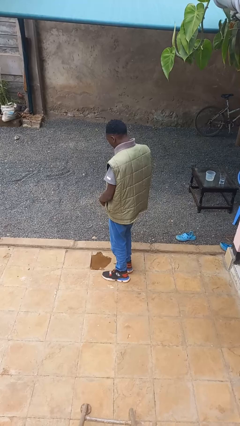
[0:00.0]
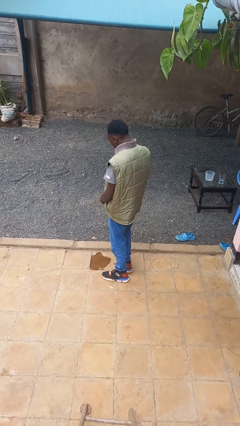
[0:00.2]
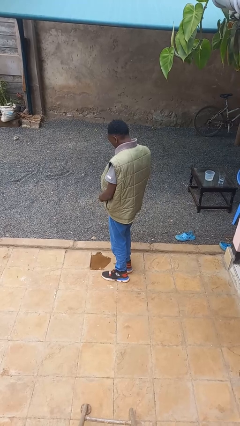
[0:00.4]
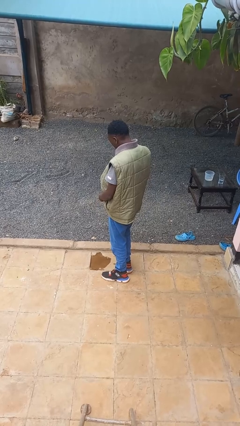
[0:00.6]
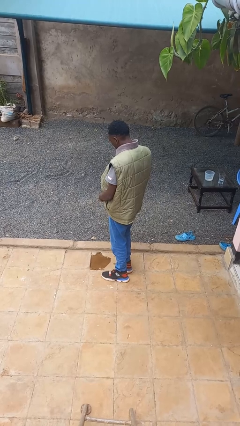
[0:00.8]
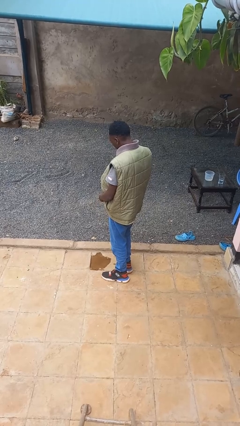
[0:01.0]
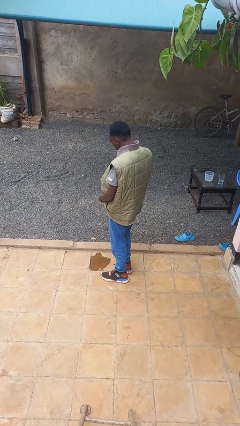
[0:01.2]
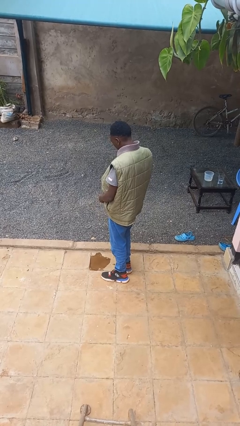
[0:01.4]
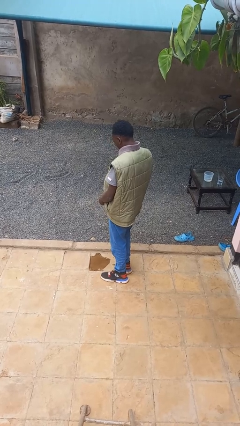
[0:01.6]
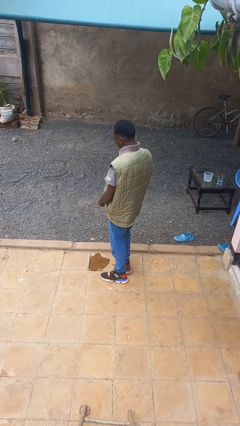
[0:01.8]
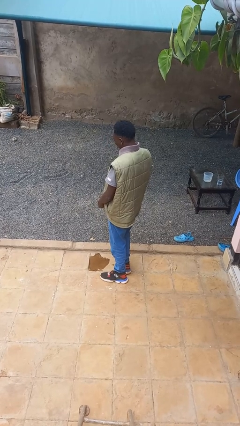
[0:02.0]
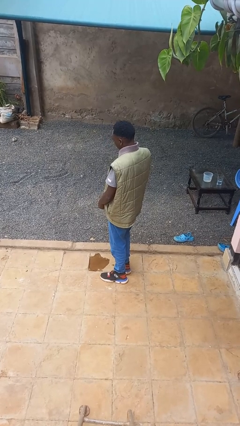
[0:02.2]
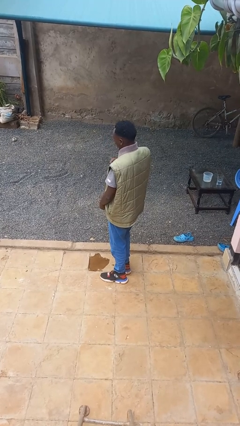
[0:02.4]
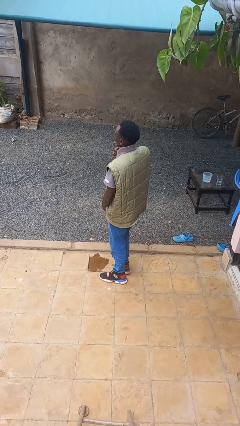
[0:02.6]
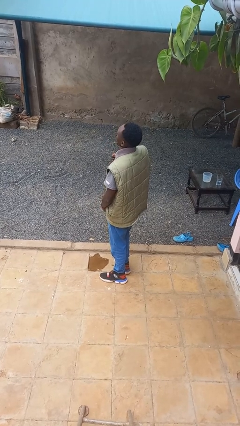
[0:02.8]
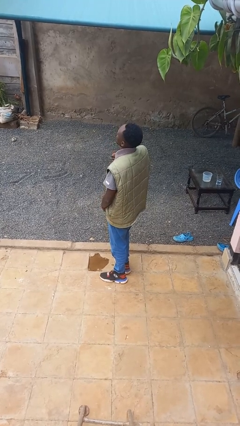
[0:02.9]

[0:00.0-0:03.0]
person zips up jacket

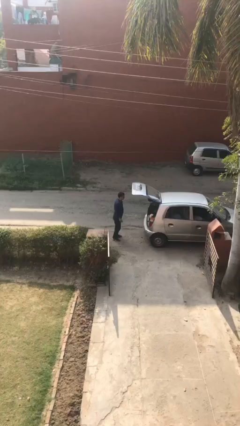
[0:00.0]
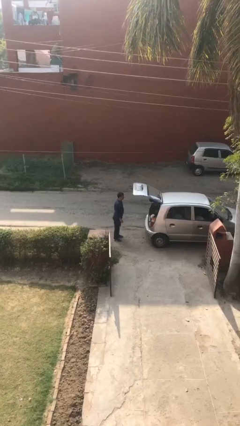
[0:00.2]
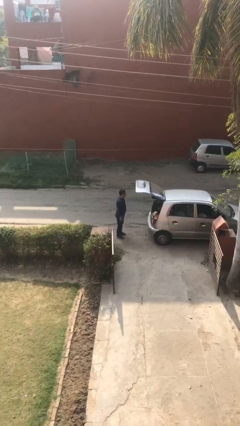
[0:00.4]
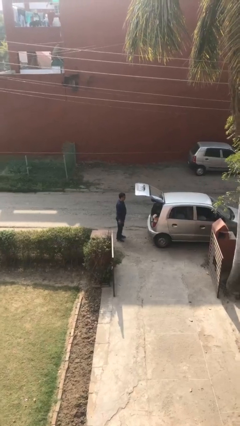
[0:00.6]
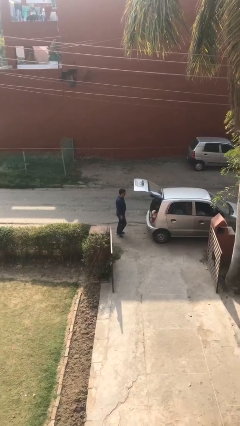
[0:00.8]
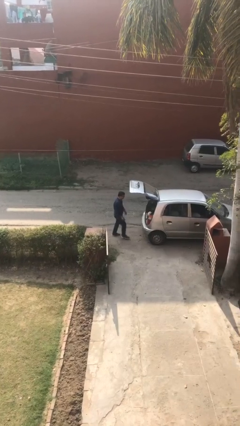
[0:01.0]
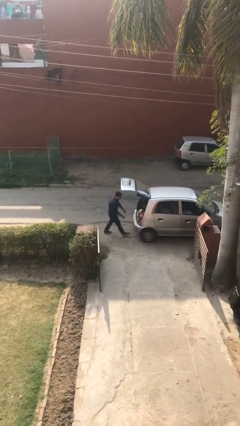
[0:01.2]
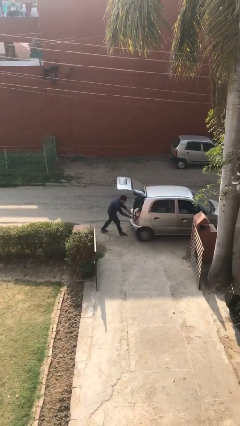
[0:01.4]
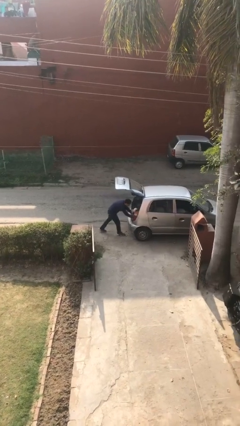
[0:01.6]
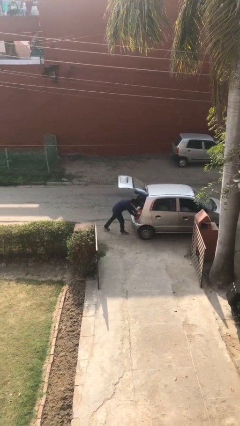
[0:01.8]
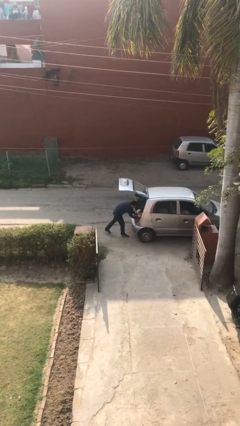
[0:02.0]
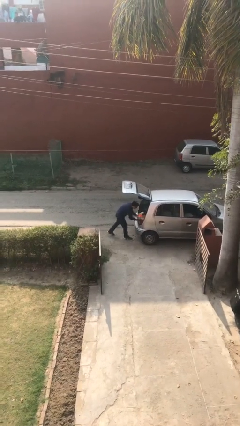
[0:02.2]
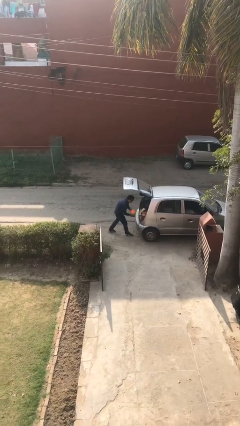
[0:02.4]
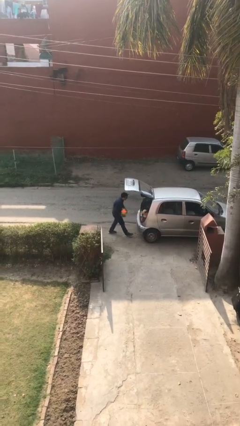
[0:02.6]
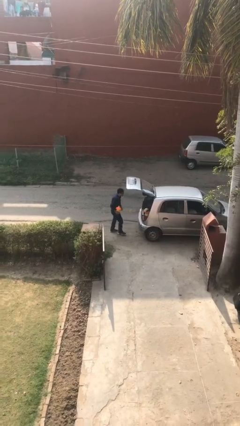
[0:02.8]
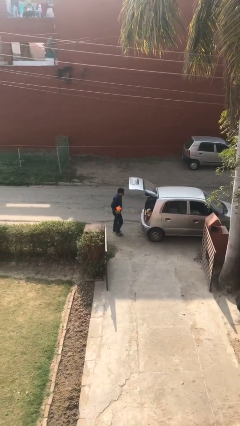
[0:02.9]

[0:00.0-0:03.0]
person unloads car

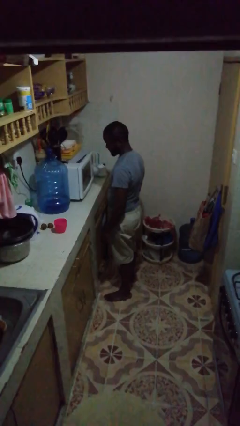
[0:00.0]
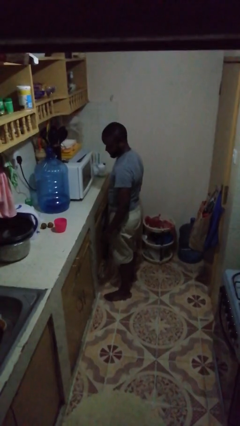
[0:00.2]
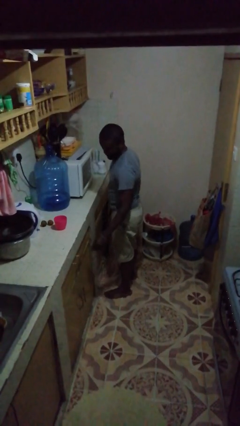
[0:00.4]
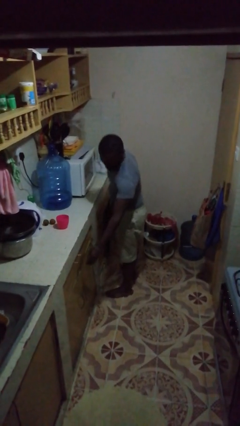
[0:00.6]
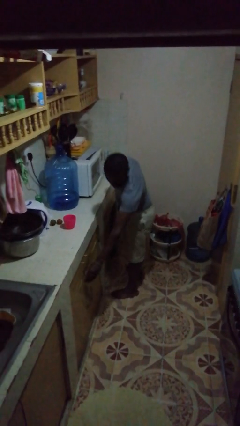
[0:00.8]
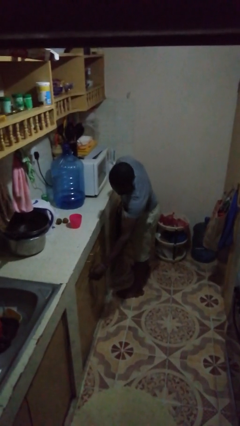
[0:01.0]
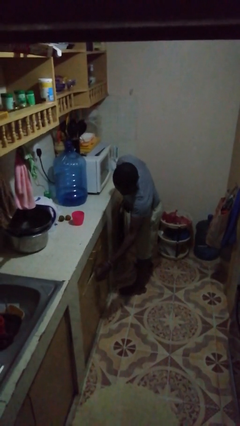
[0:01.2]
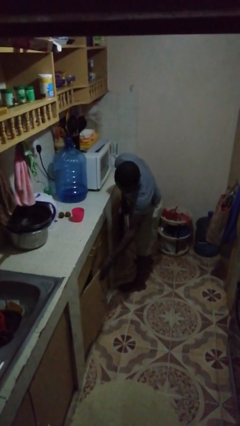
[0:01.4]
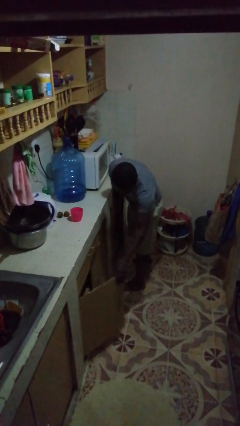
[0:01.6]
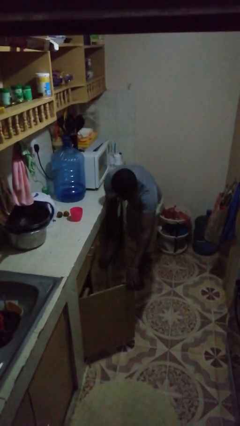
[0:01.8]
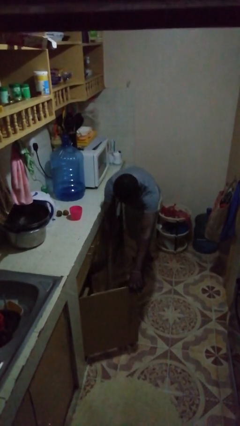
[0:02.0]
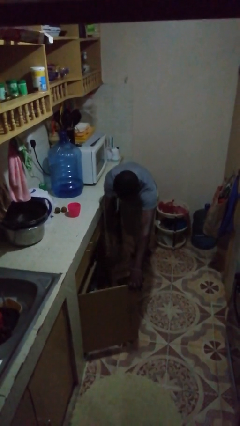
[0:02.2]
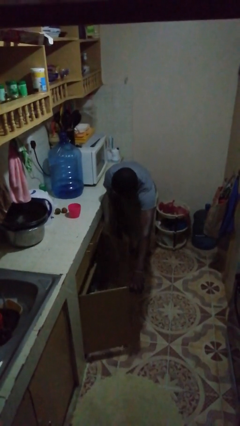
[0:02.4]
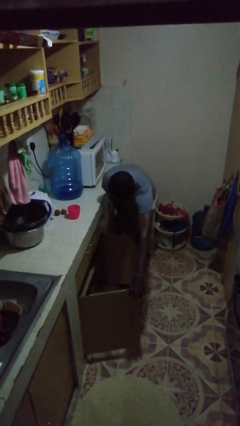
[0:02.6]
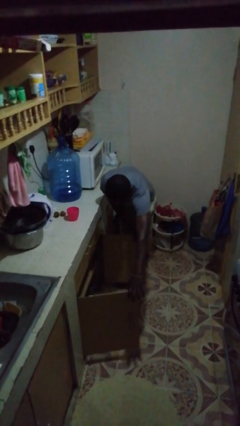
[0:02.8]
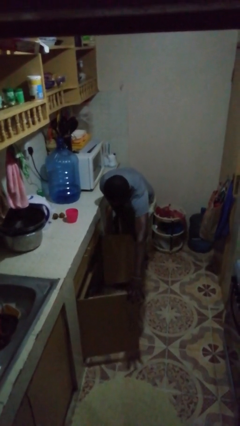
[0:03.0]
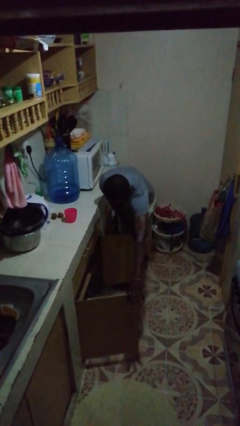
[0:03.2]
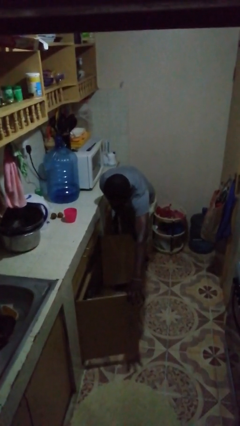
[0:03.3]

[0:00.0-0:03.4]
person opens cabinet

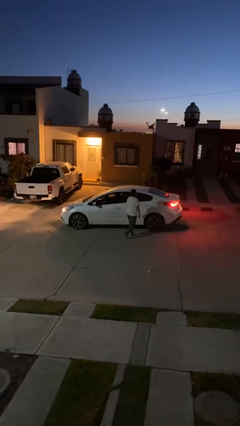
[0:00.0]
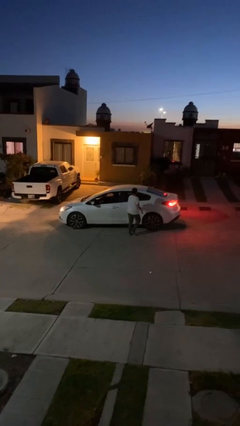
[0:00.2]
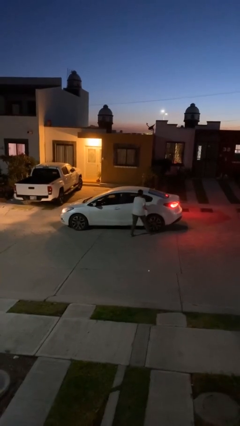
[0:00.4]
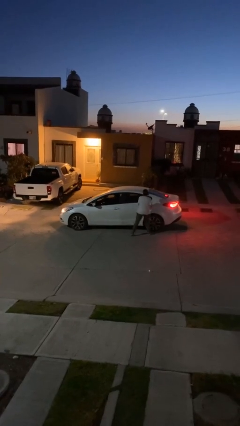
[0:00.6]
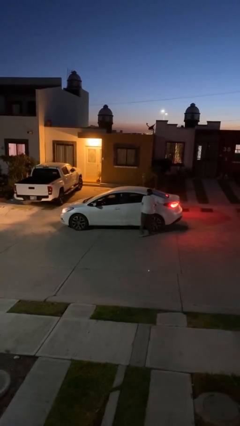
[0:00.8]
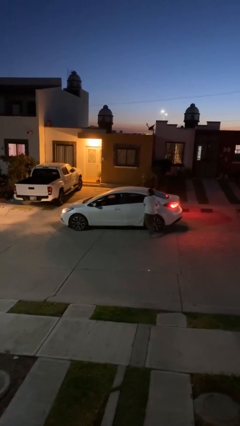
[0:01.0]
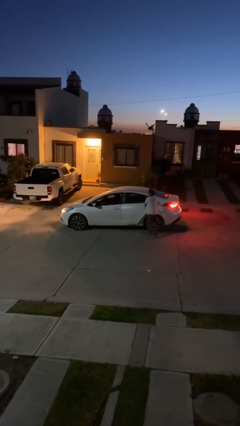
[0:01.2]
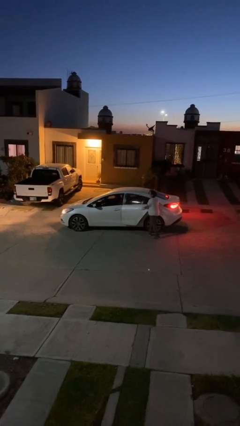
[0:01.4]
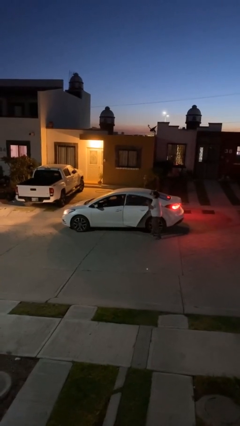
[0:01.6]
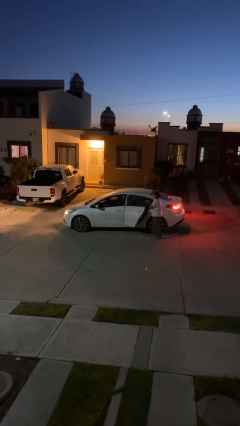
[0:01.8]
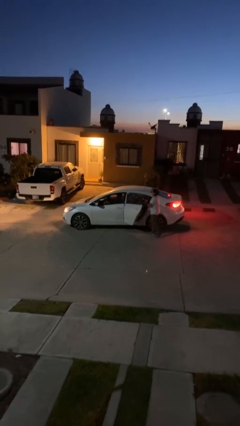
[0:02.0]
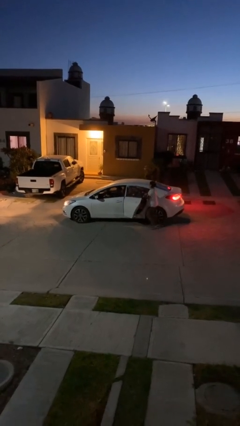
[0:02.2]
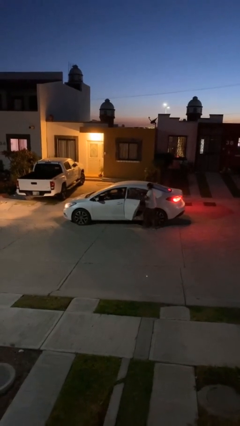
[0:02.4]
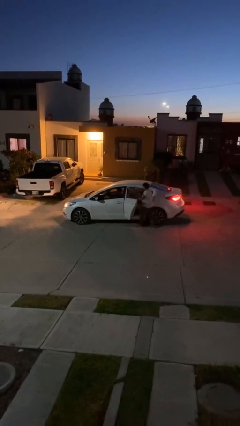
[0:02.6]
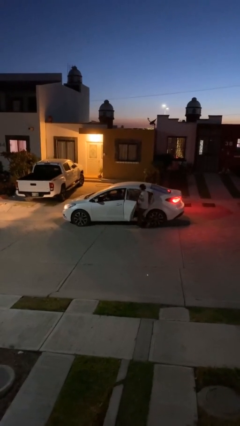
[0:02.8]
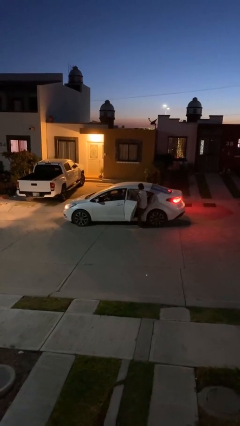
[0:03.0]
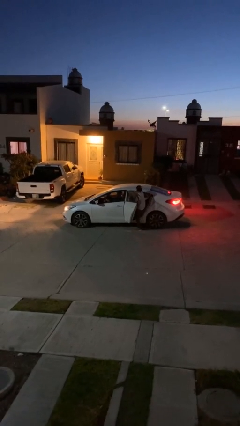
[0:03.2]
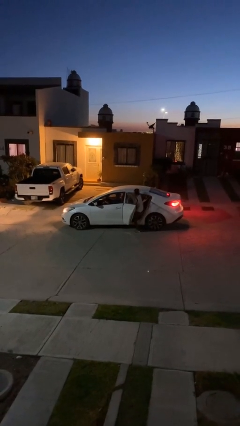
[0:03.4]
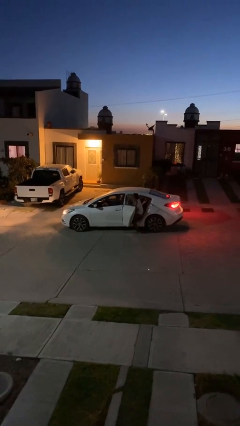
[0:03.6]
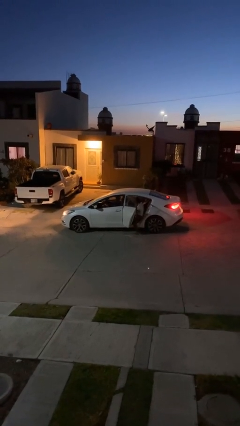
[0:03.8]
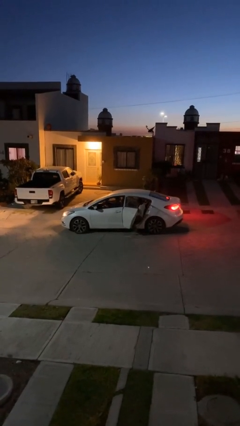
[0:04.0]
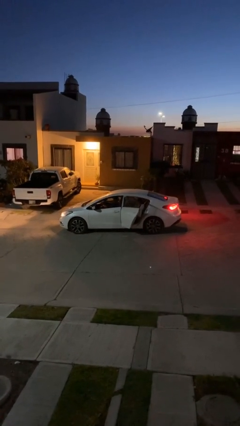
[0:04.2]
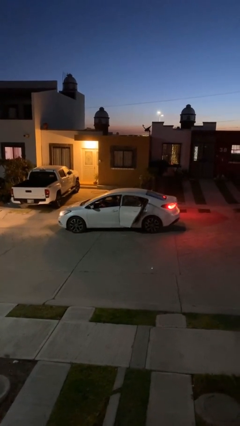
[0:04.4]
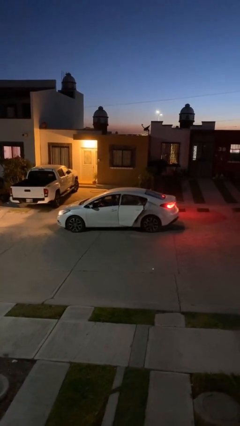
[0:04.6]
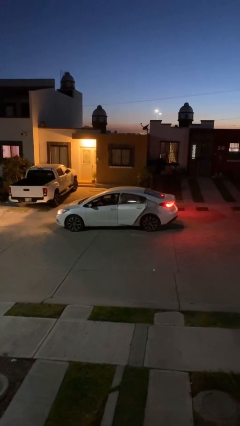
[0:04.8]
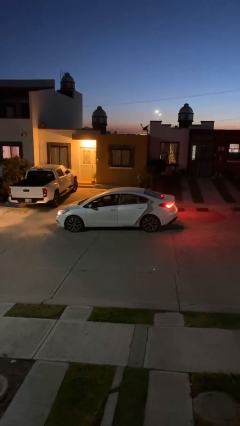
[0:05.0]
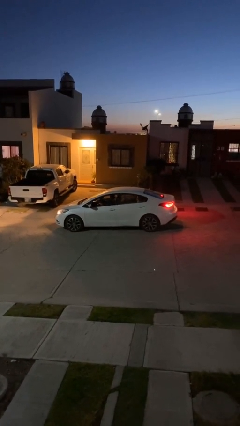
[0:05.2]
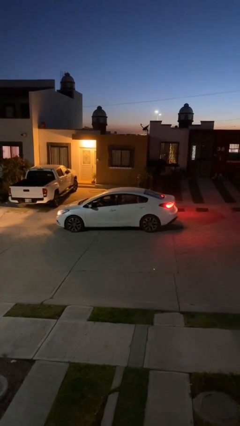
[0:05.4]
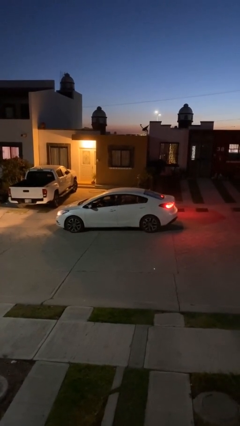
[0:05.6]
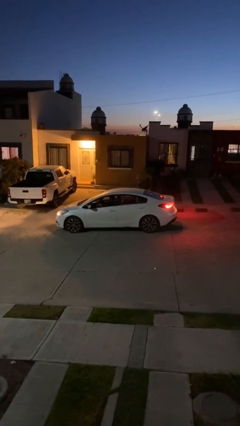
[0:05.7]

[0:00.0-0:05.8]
car picks up person

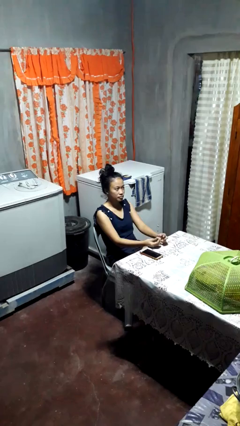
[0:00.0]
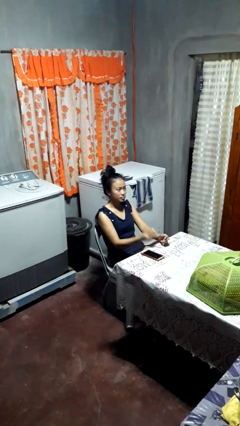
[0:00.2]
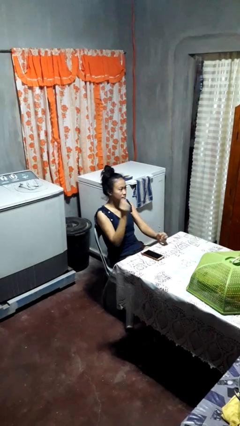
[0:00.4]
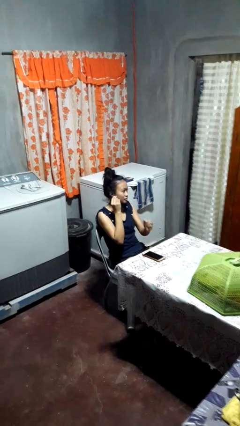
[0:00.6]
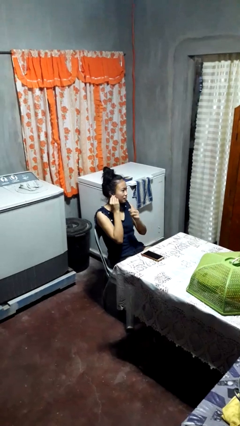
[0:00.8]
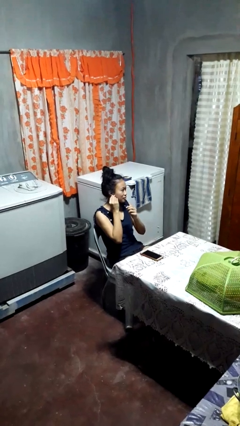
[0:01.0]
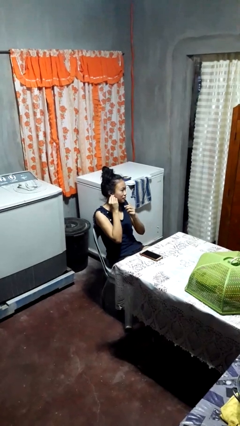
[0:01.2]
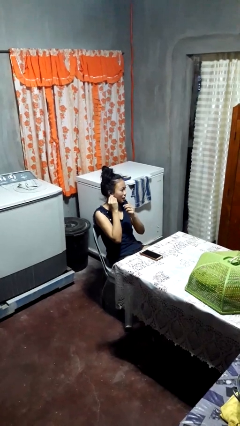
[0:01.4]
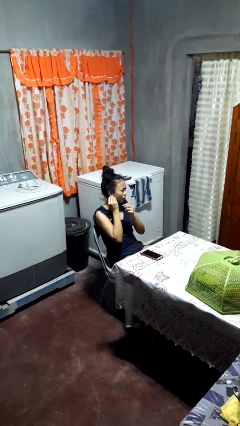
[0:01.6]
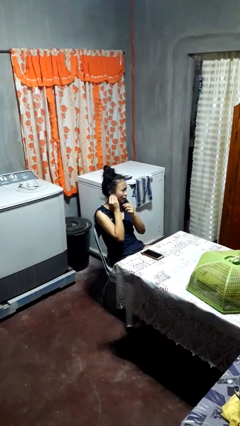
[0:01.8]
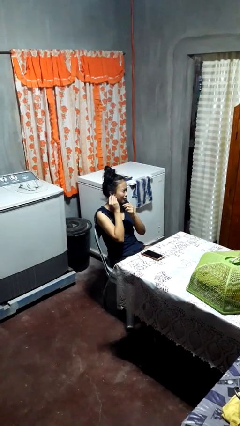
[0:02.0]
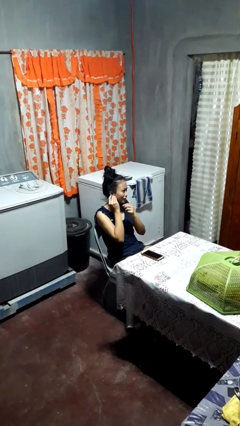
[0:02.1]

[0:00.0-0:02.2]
person puts on earrings
